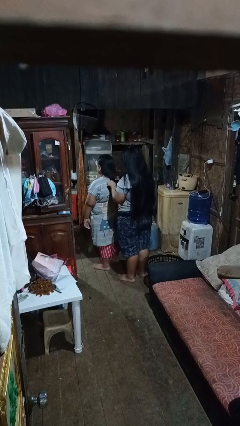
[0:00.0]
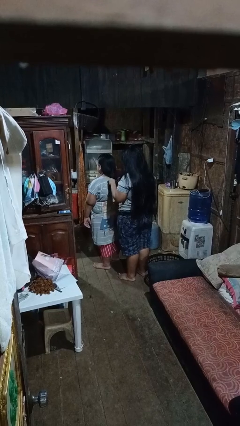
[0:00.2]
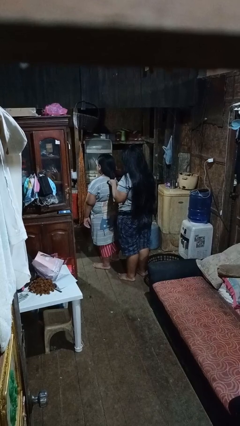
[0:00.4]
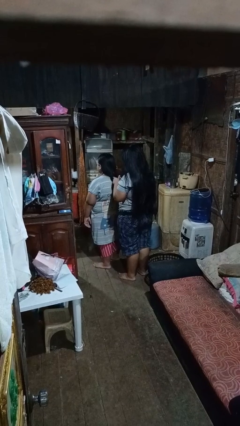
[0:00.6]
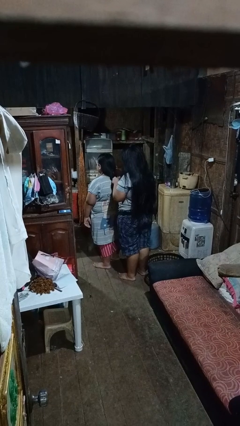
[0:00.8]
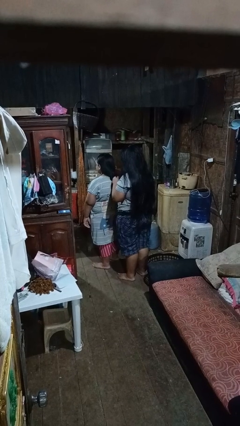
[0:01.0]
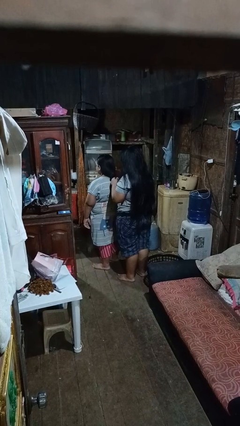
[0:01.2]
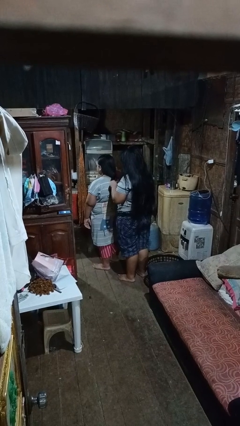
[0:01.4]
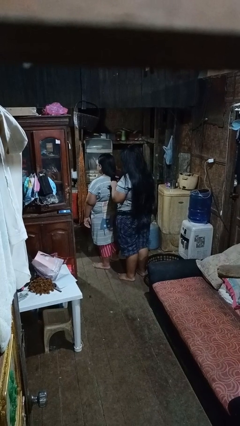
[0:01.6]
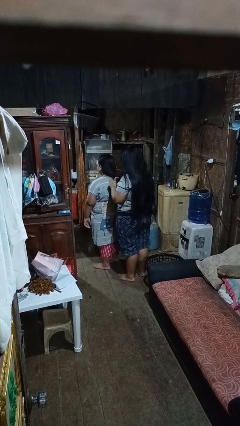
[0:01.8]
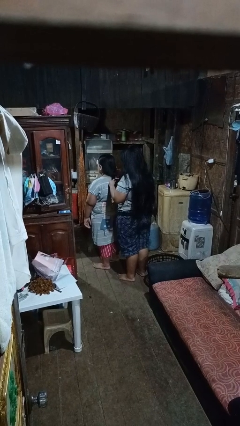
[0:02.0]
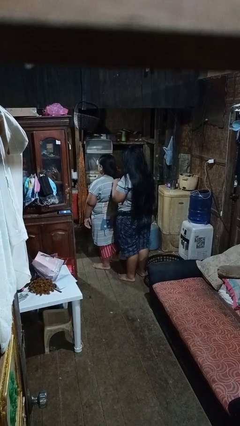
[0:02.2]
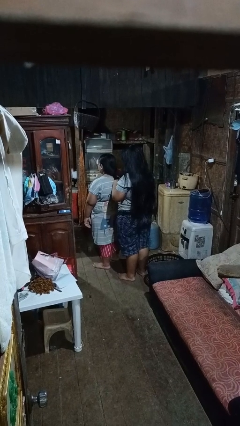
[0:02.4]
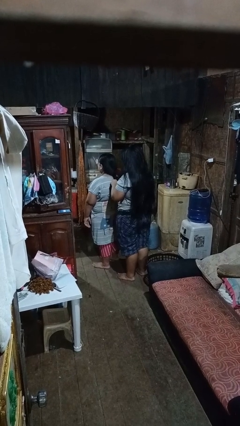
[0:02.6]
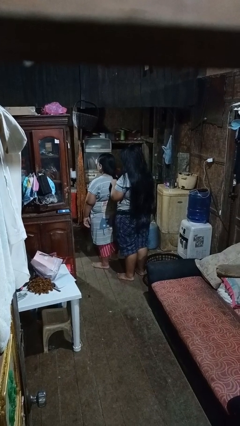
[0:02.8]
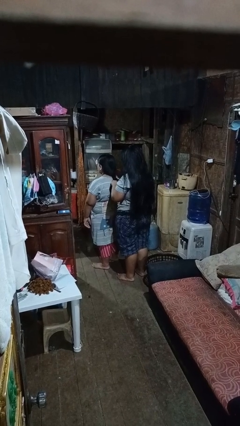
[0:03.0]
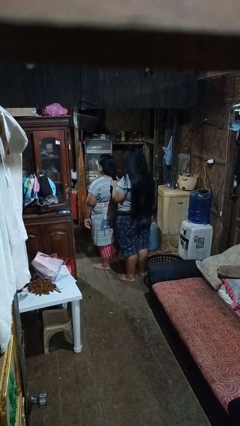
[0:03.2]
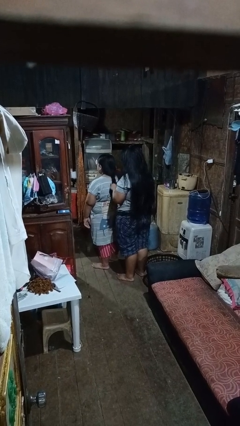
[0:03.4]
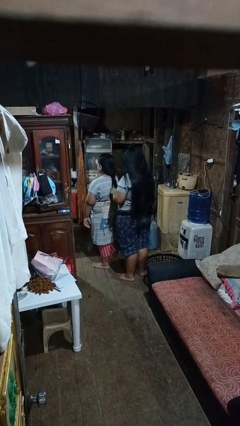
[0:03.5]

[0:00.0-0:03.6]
person braids hair of person

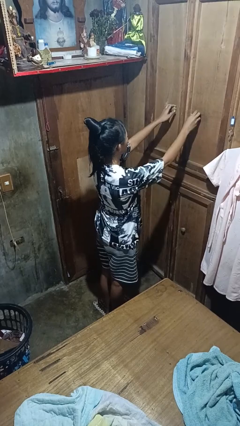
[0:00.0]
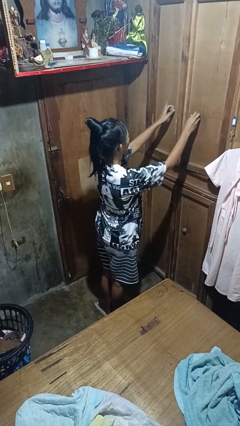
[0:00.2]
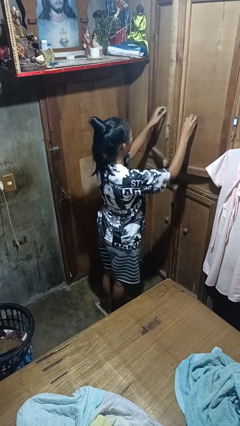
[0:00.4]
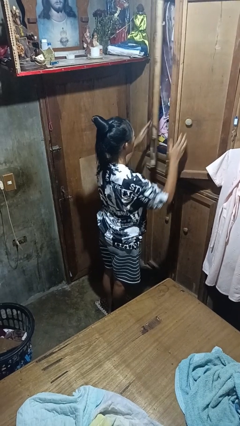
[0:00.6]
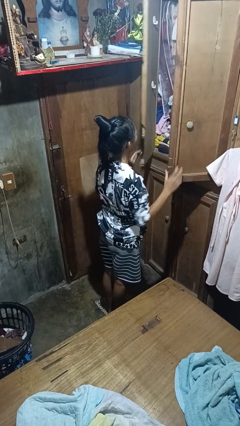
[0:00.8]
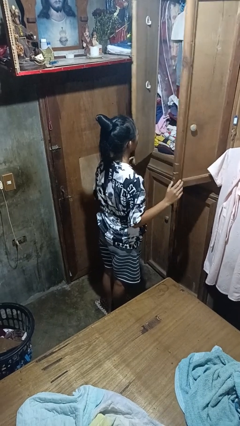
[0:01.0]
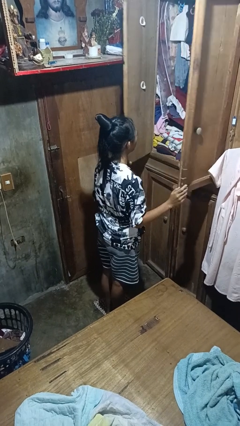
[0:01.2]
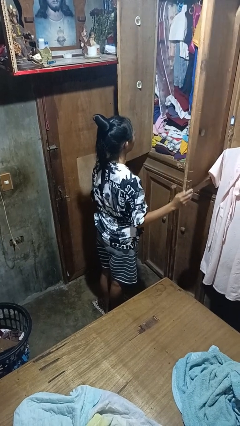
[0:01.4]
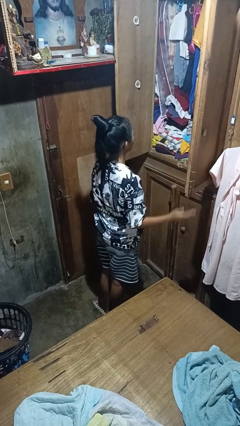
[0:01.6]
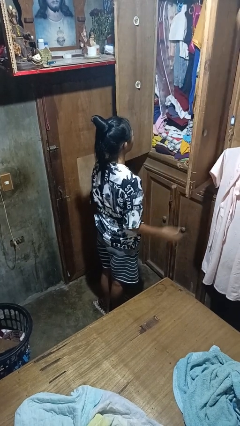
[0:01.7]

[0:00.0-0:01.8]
person opens closet door

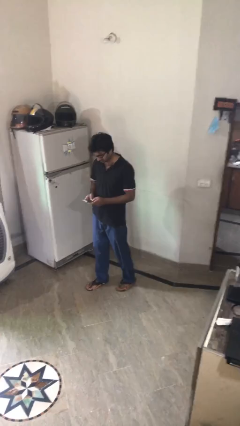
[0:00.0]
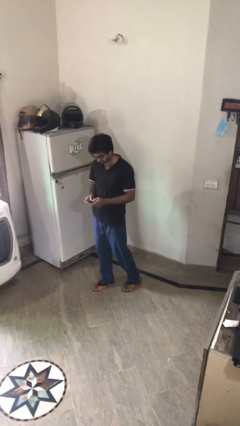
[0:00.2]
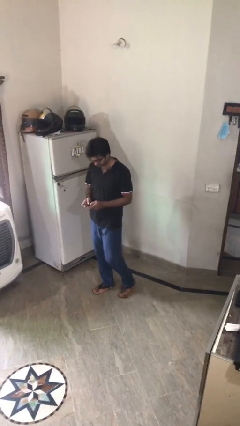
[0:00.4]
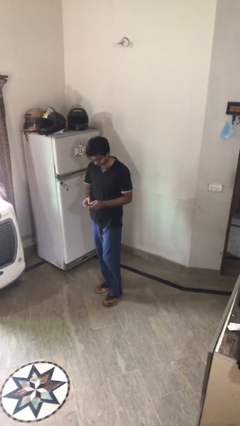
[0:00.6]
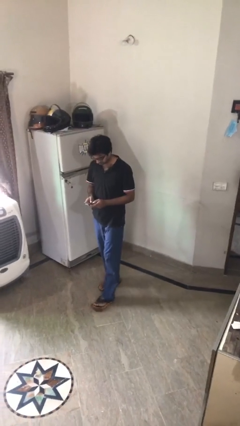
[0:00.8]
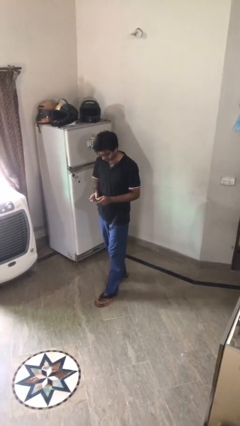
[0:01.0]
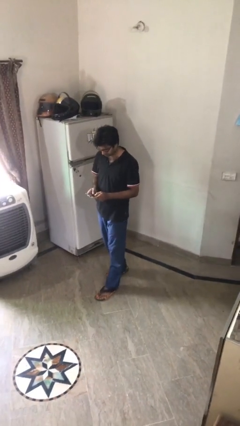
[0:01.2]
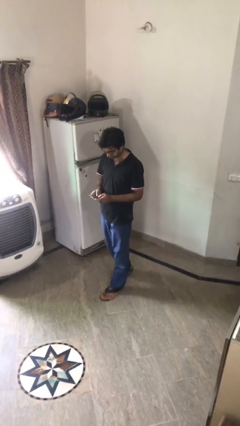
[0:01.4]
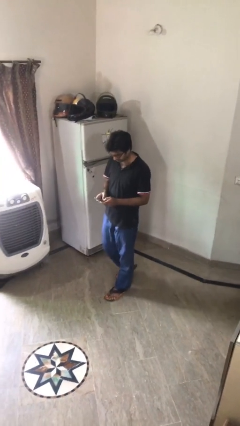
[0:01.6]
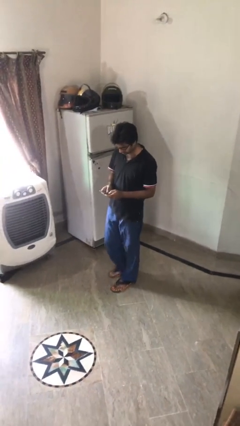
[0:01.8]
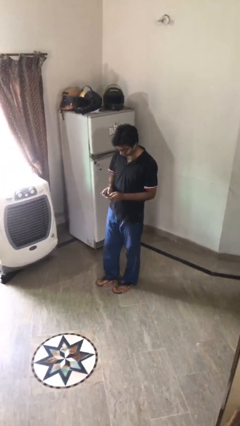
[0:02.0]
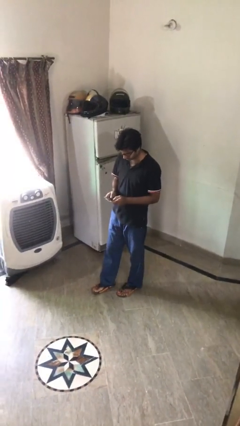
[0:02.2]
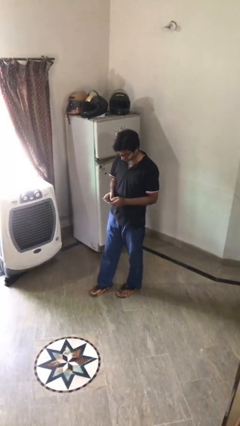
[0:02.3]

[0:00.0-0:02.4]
person texts on phone

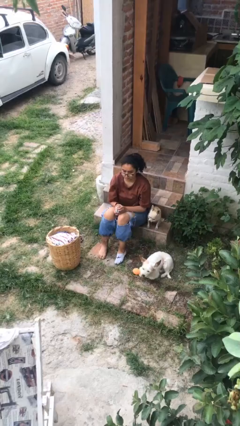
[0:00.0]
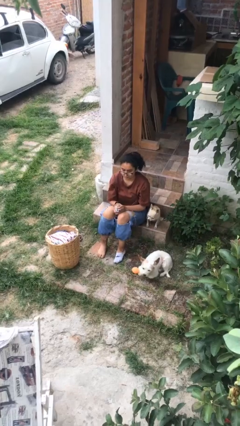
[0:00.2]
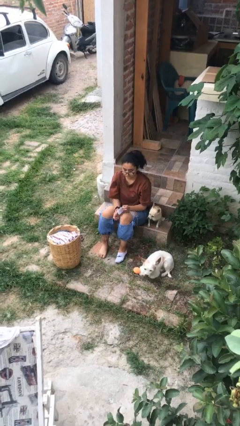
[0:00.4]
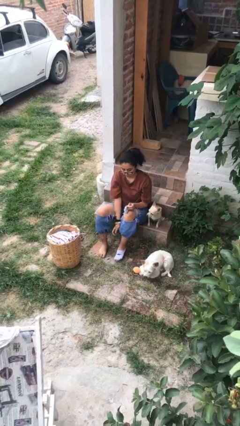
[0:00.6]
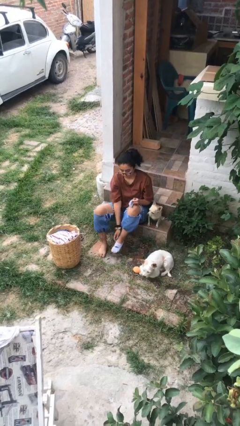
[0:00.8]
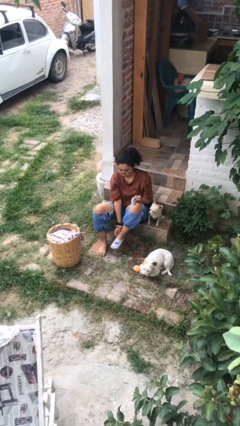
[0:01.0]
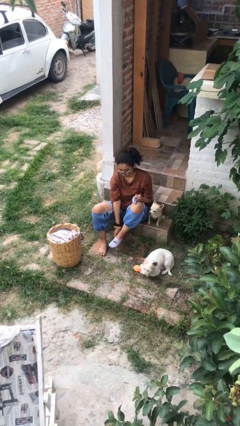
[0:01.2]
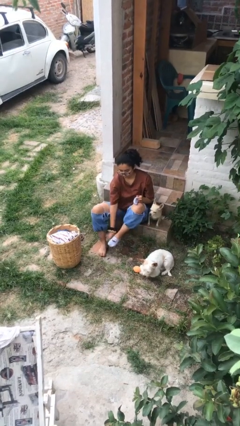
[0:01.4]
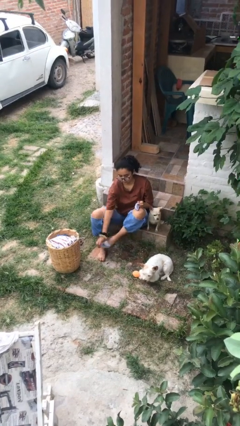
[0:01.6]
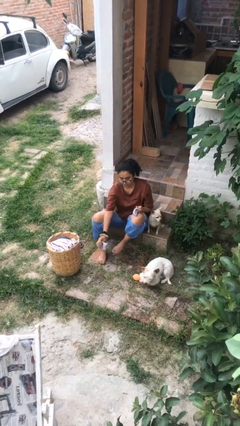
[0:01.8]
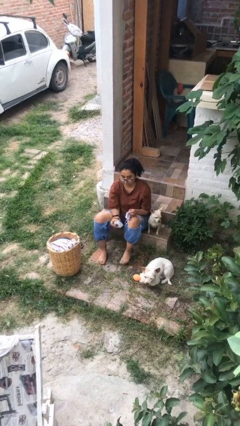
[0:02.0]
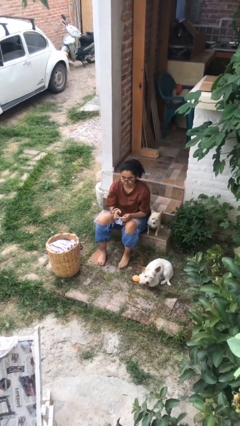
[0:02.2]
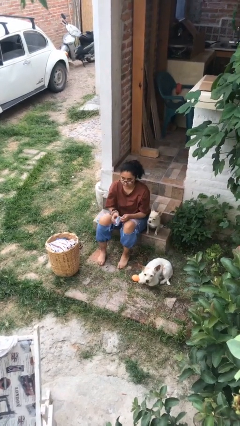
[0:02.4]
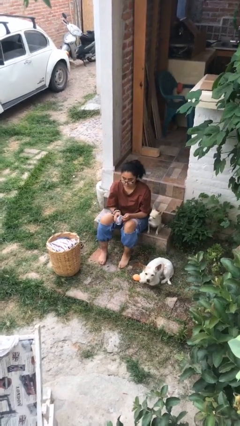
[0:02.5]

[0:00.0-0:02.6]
person takes off socks

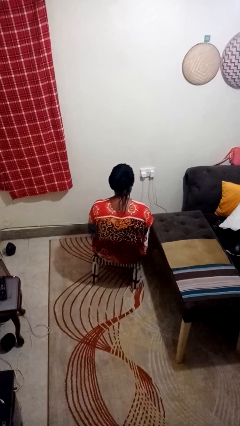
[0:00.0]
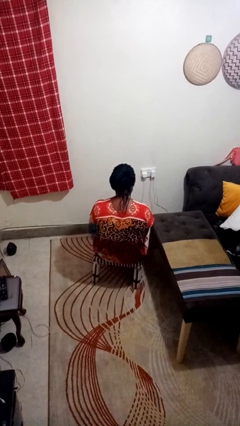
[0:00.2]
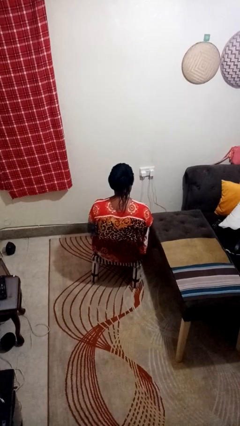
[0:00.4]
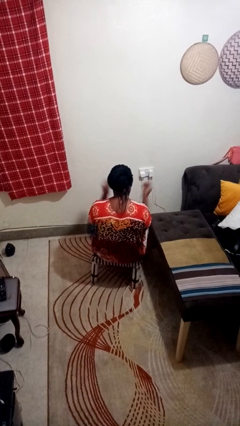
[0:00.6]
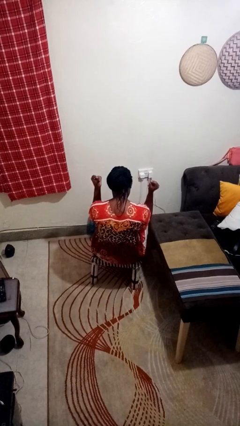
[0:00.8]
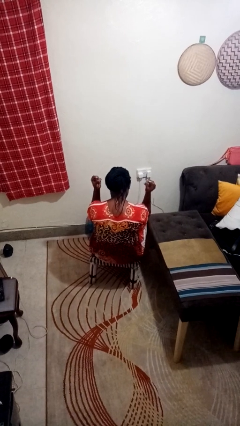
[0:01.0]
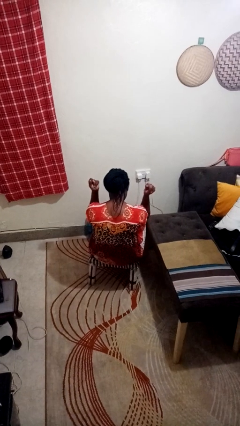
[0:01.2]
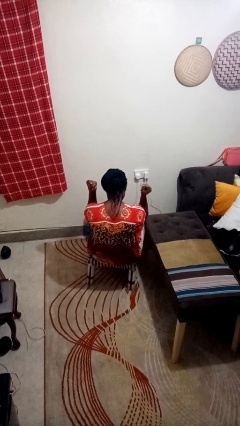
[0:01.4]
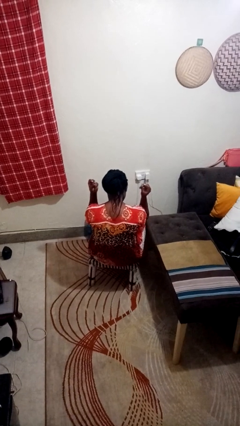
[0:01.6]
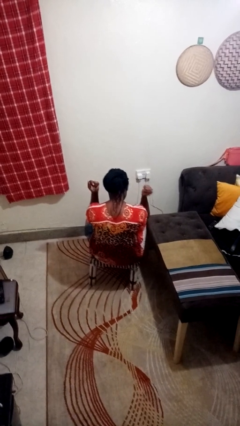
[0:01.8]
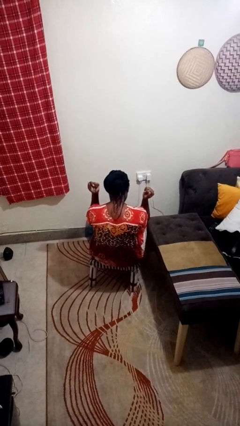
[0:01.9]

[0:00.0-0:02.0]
person snaps fingers

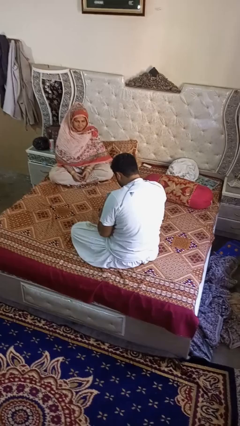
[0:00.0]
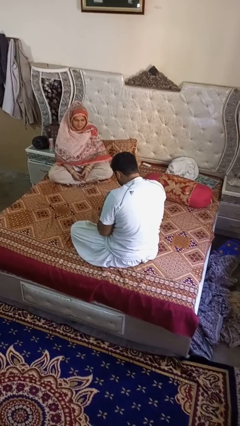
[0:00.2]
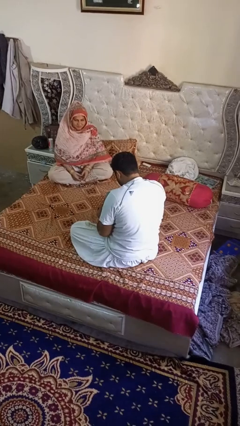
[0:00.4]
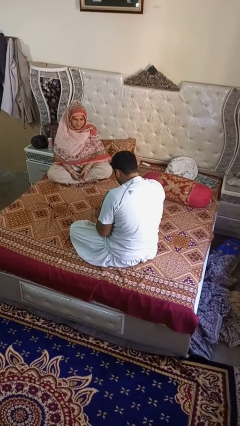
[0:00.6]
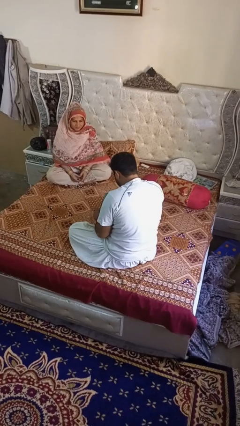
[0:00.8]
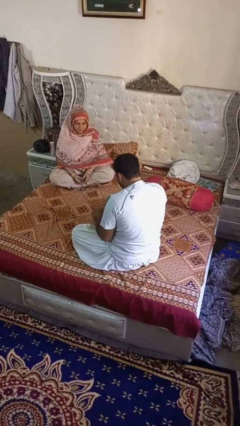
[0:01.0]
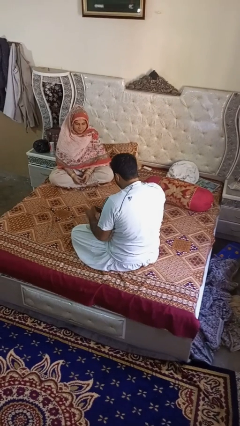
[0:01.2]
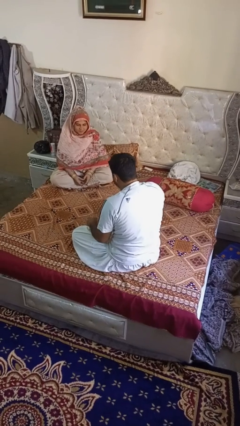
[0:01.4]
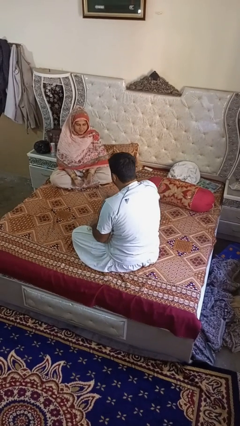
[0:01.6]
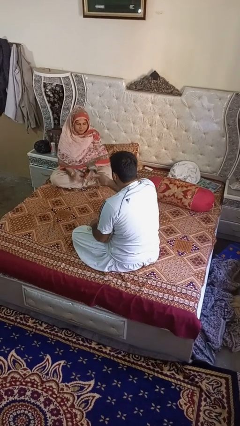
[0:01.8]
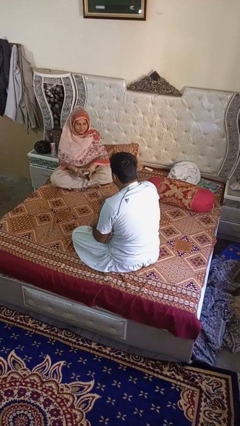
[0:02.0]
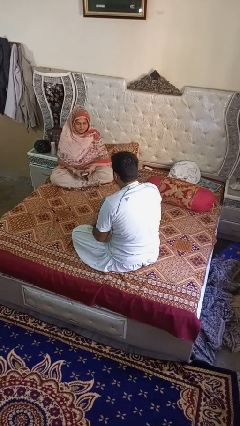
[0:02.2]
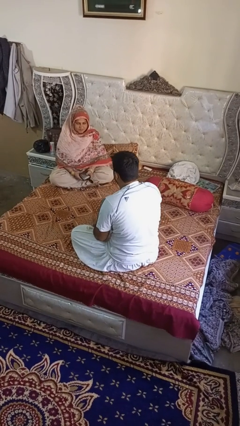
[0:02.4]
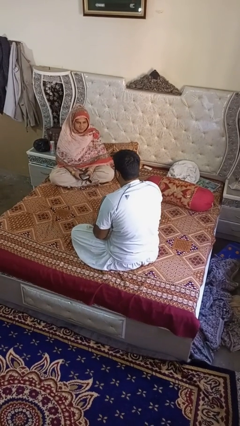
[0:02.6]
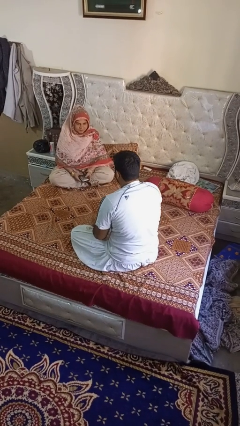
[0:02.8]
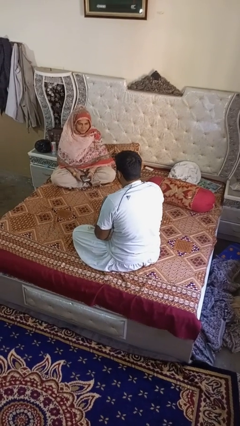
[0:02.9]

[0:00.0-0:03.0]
person throws object to person

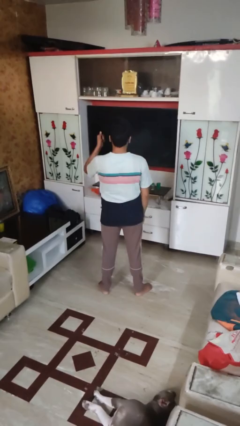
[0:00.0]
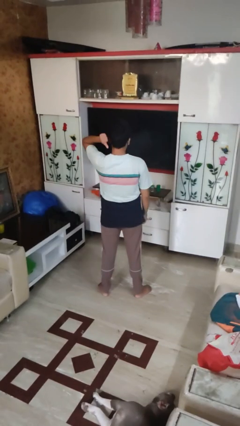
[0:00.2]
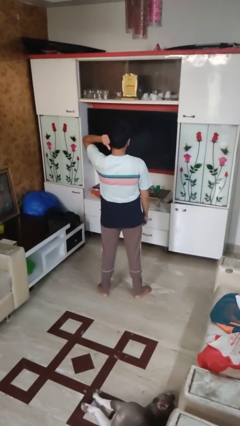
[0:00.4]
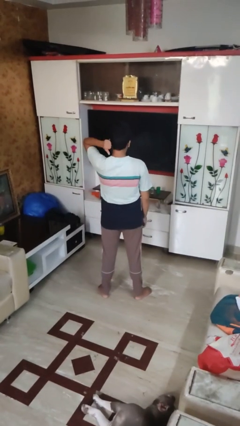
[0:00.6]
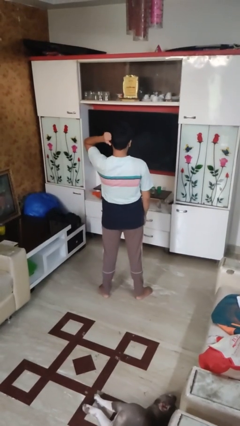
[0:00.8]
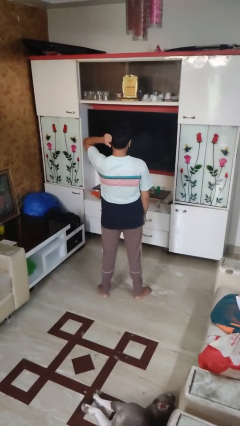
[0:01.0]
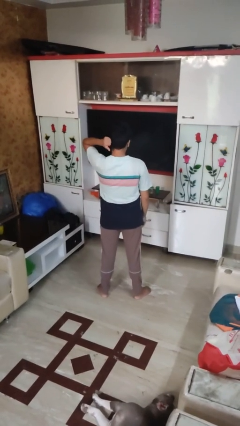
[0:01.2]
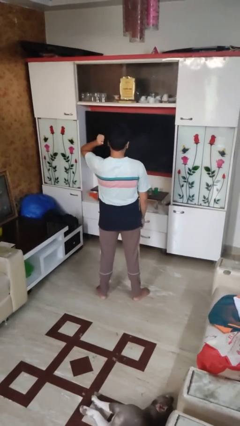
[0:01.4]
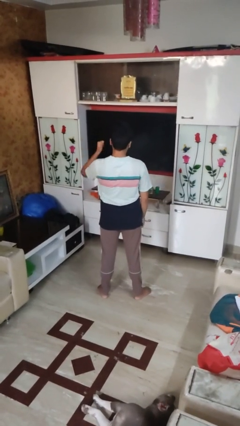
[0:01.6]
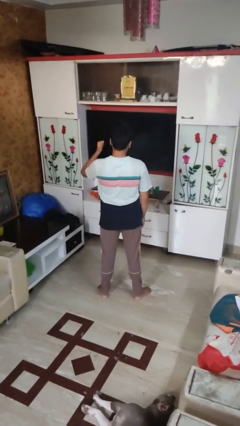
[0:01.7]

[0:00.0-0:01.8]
person gestures behind me
